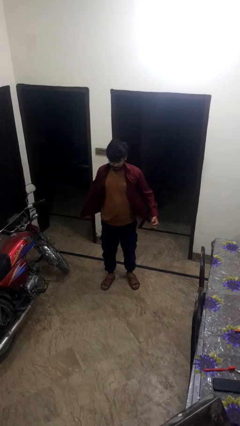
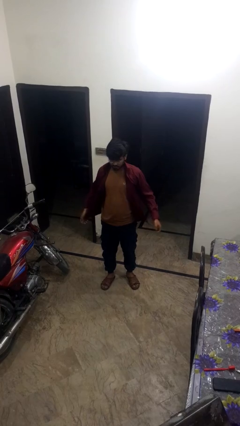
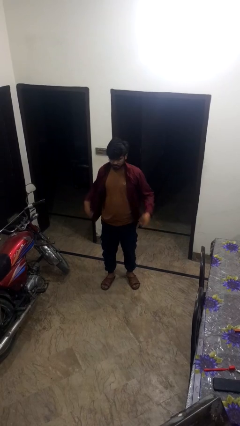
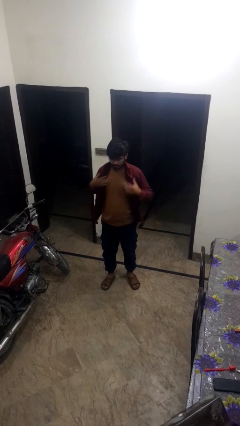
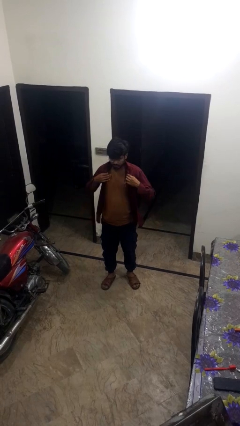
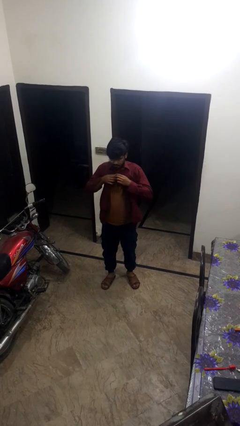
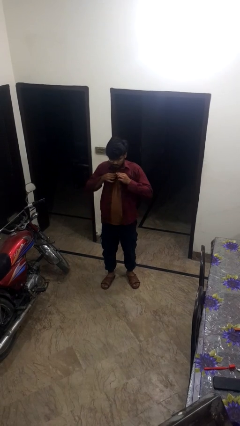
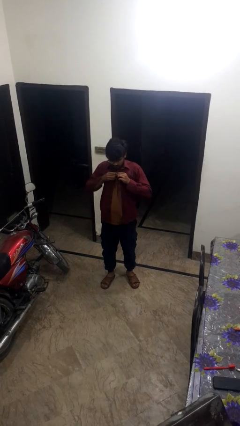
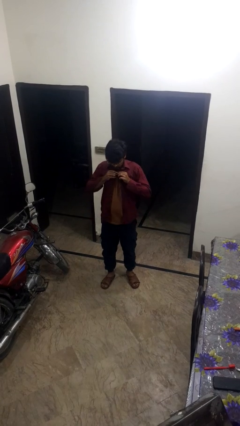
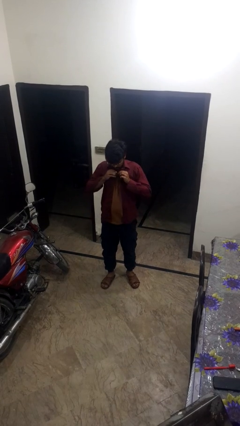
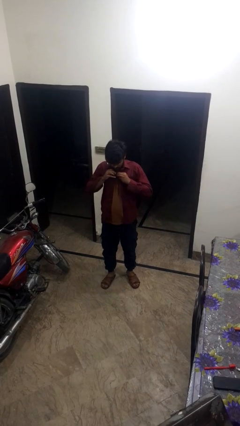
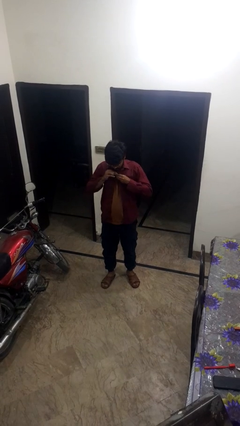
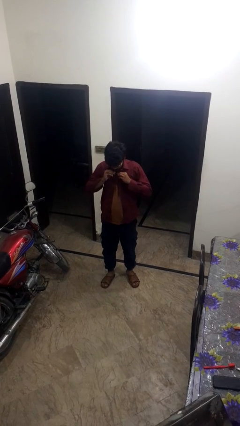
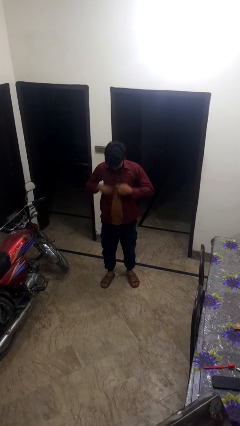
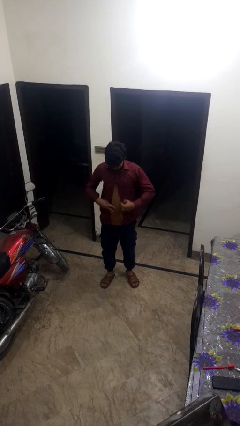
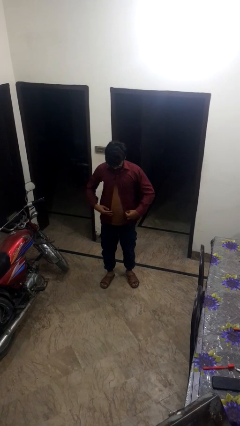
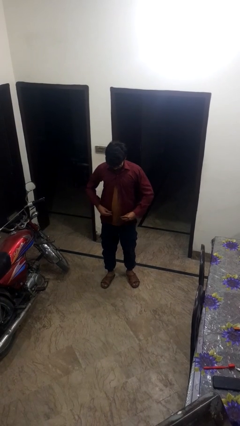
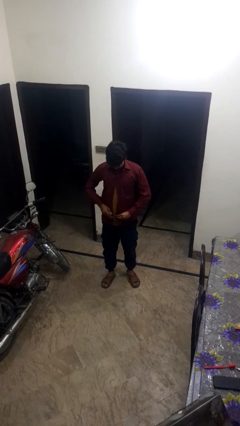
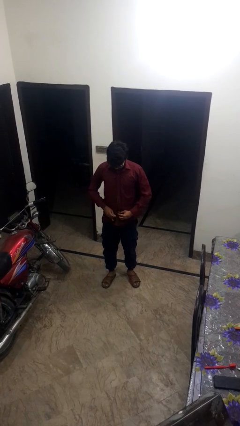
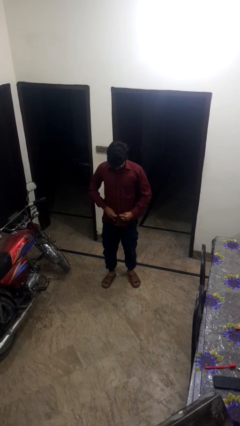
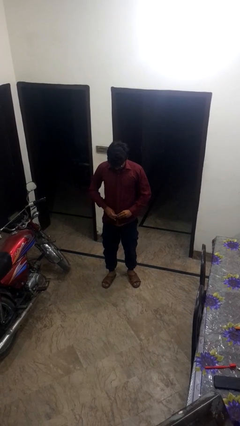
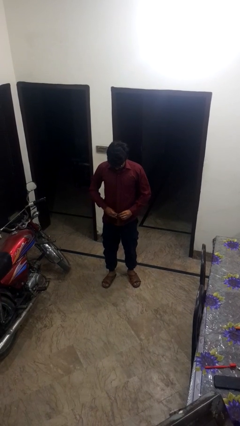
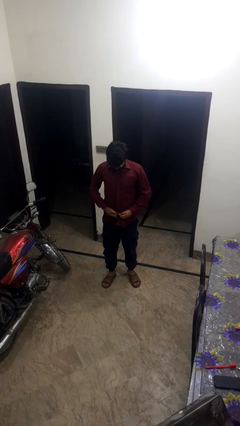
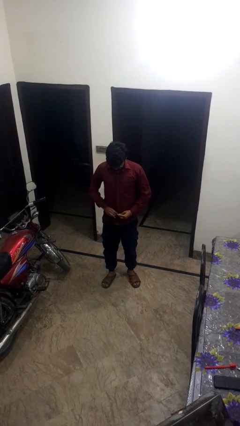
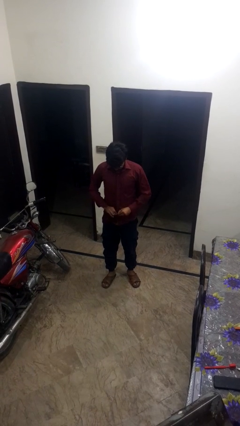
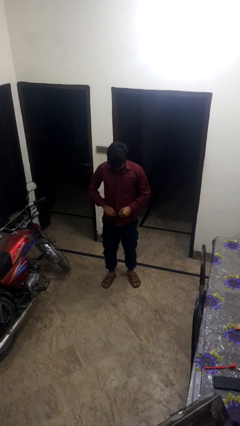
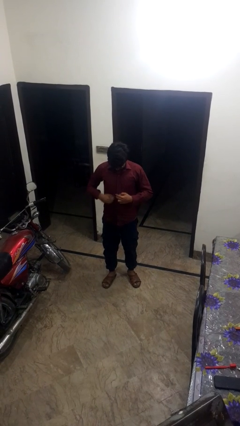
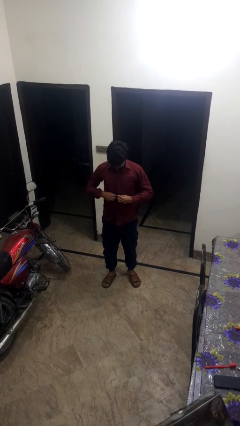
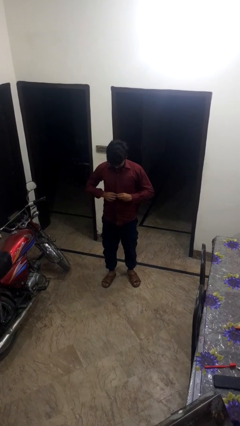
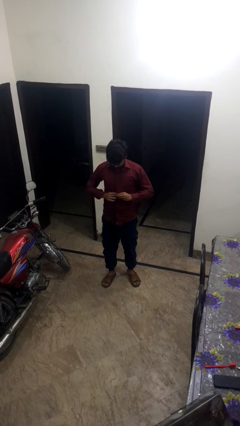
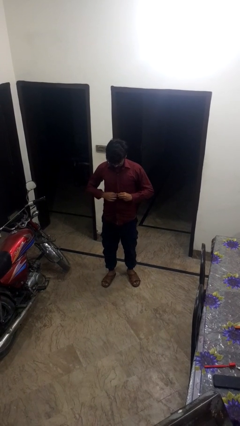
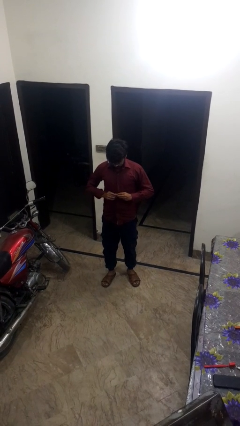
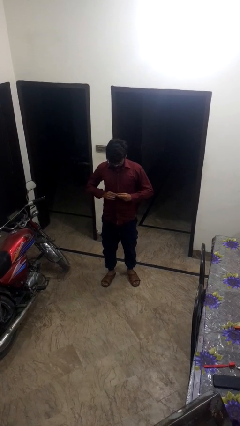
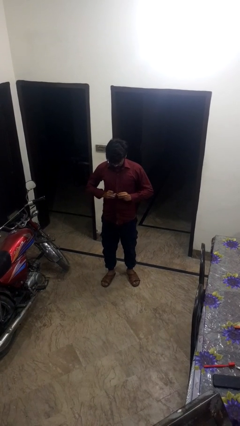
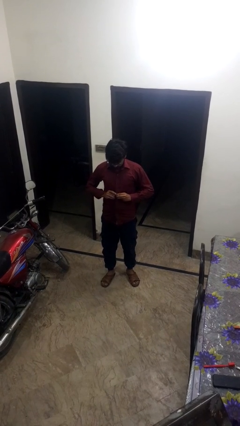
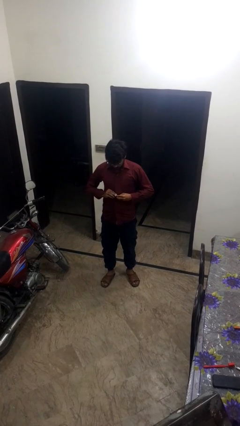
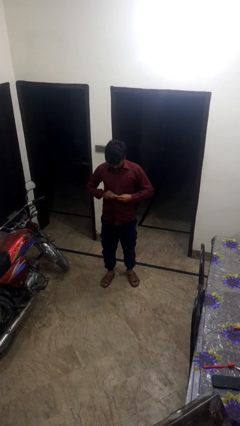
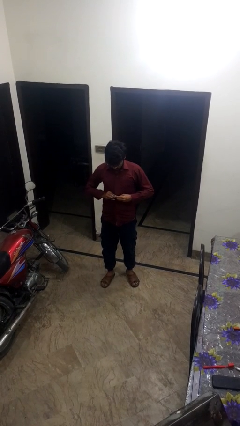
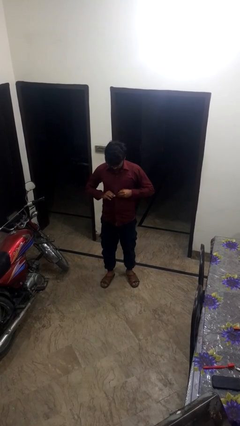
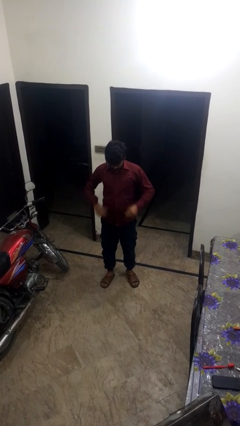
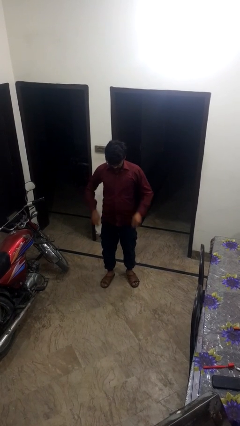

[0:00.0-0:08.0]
person buttons shirt

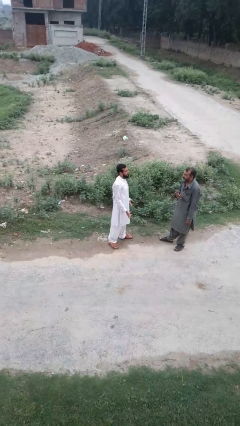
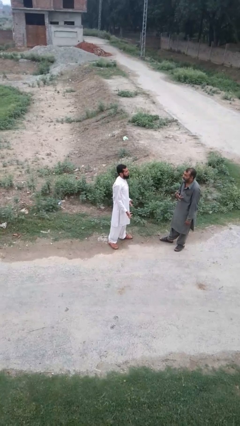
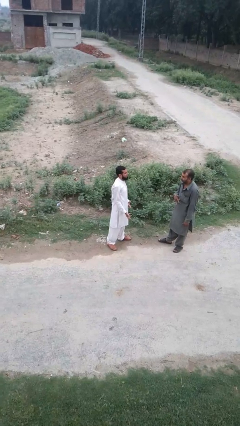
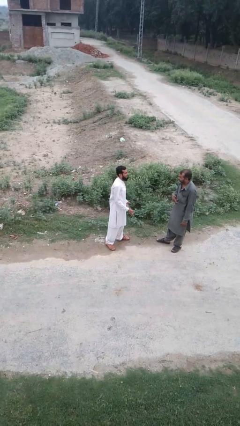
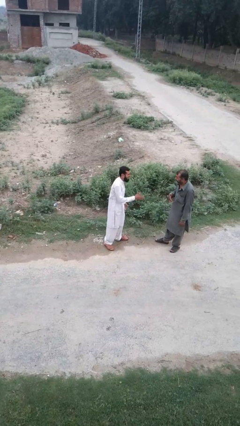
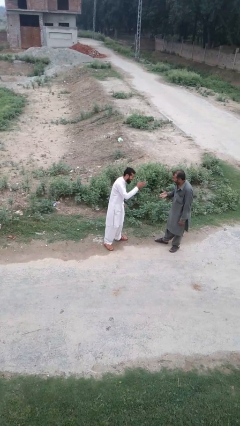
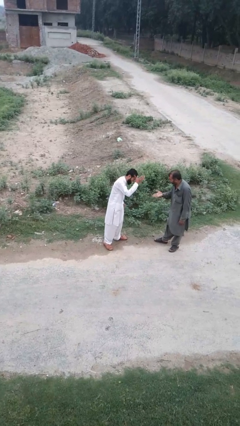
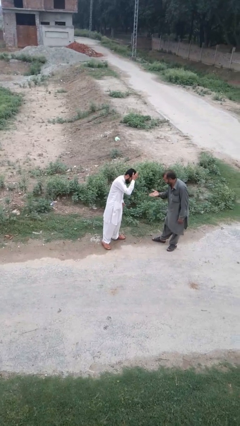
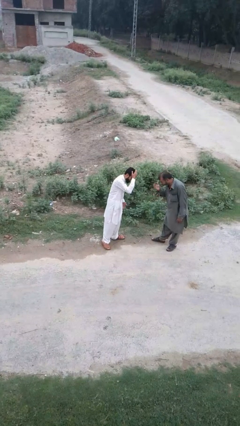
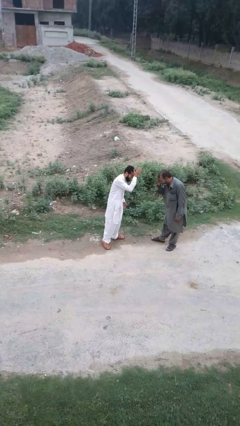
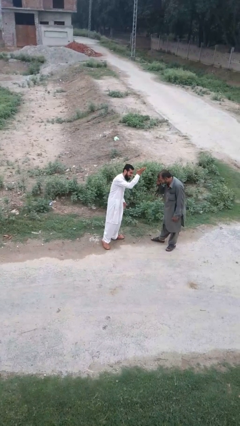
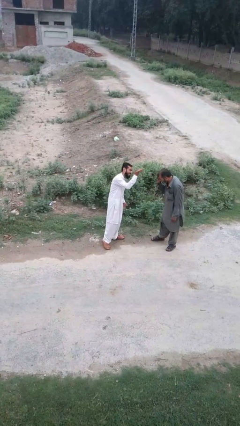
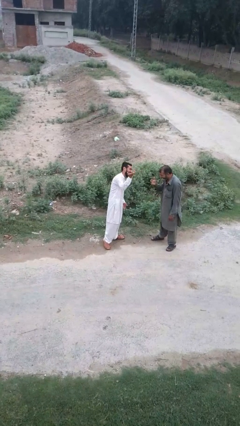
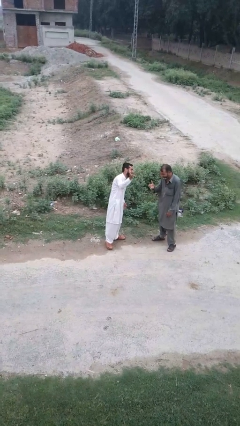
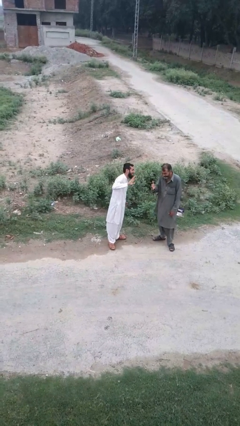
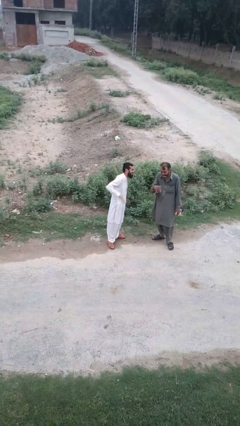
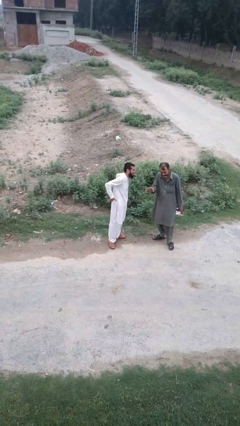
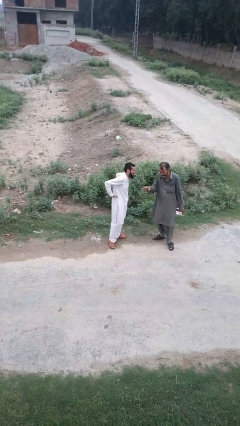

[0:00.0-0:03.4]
person laughs with person

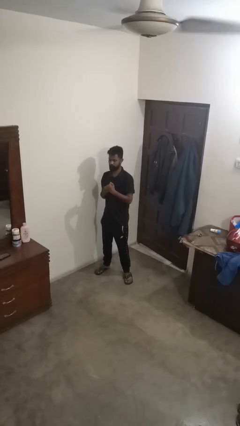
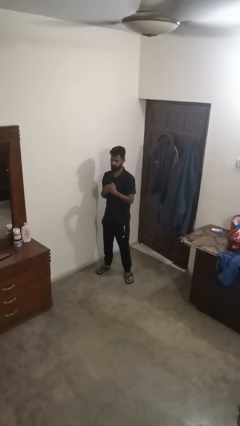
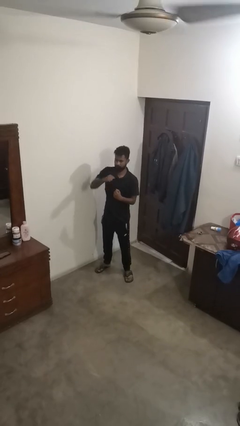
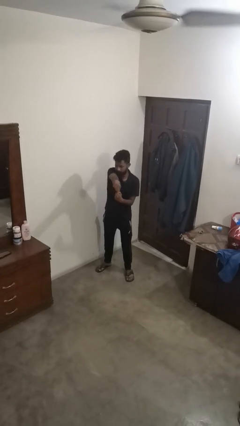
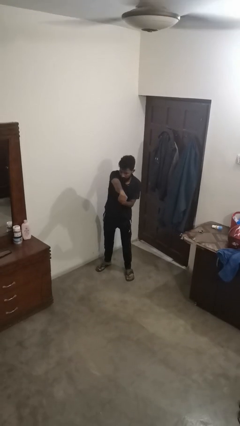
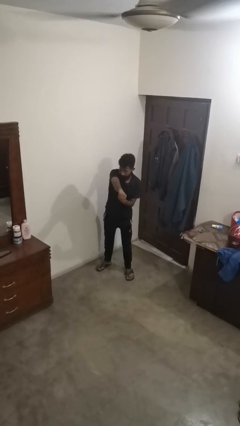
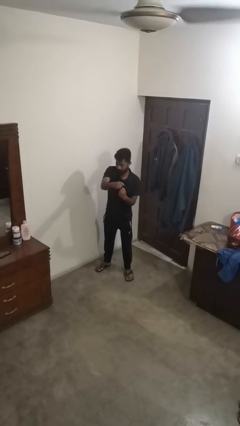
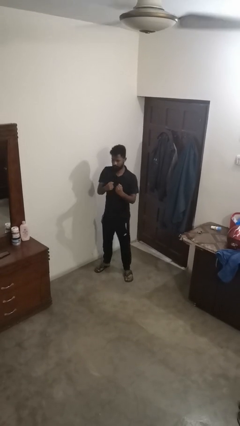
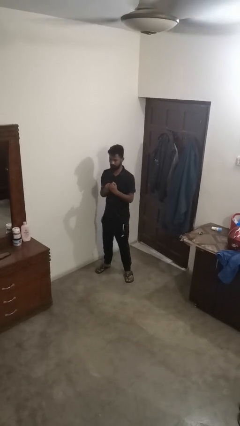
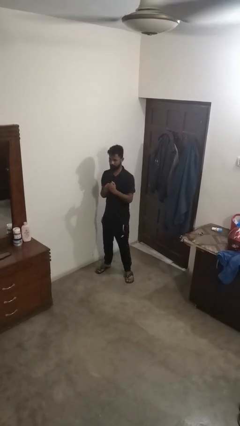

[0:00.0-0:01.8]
person punches

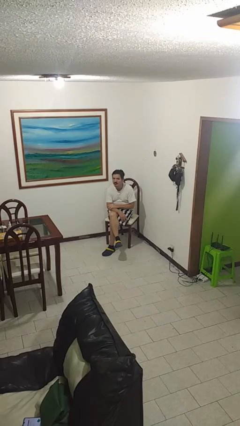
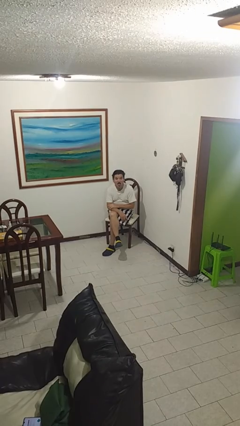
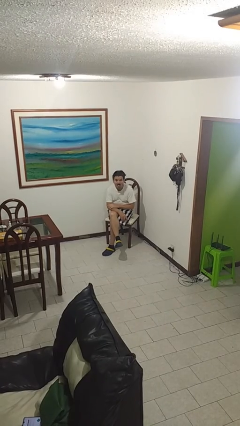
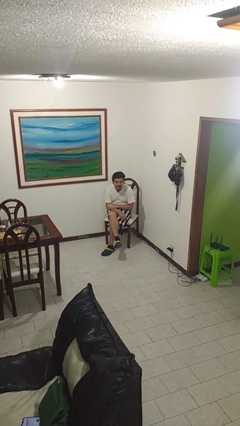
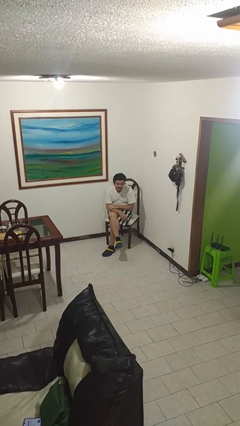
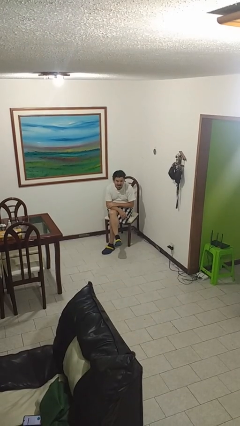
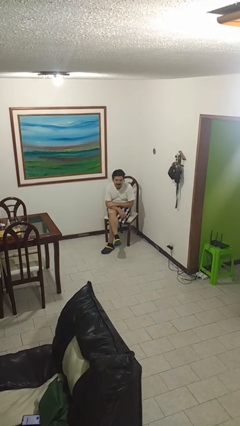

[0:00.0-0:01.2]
person sticks out tongue

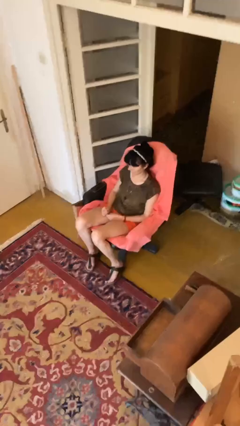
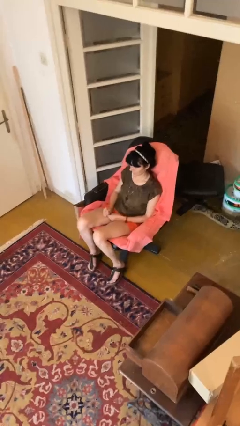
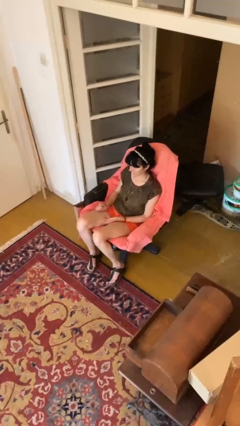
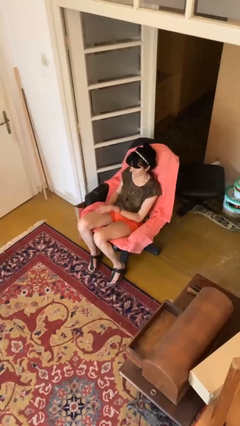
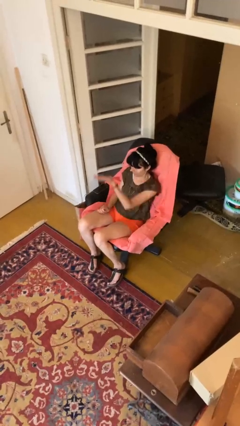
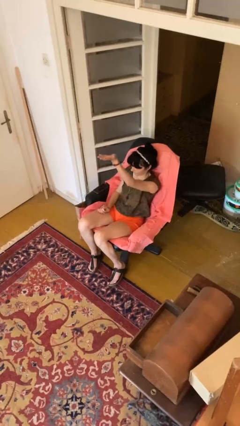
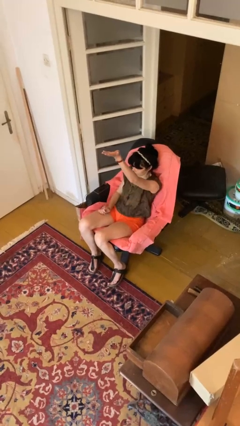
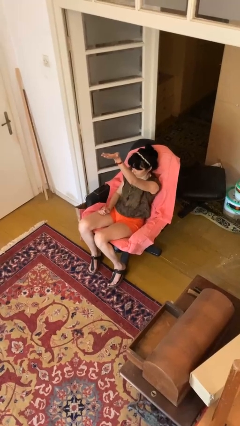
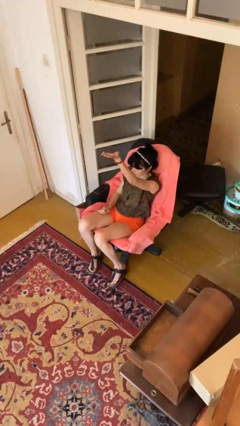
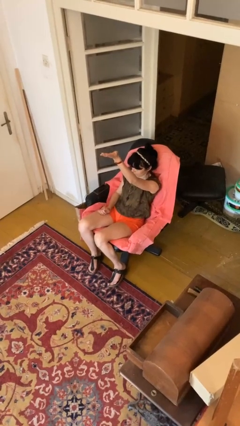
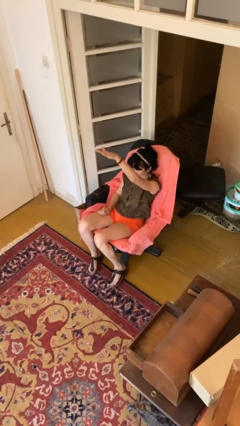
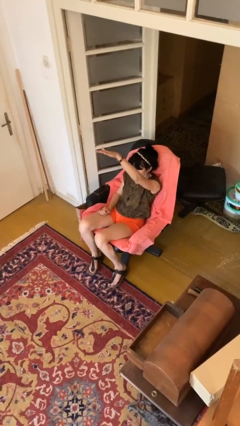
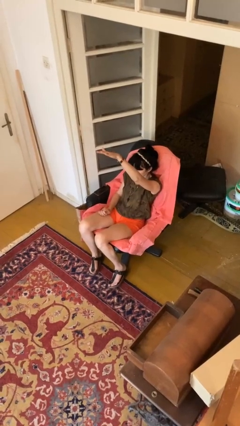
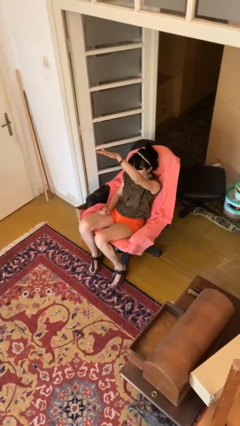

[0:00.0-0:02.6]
person gestures swipe up

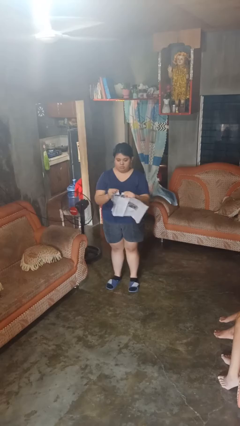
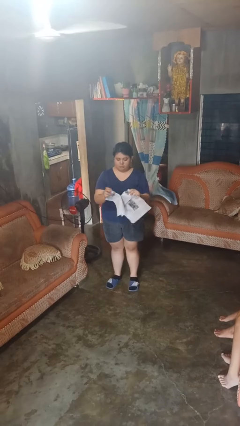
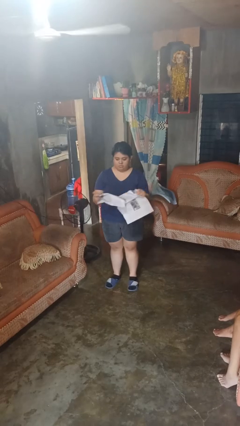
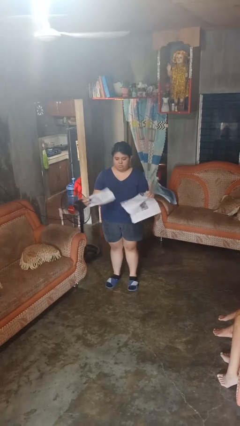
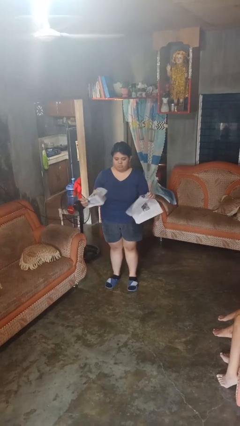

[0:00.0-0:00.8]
person tears paper
